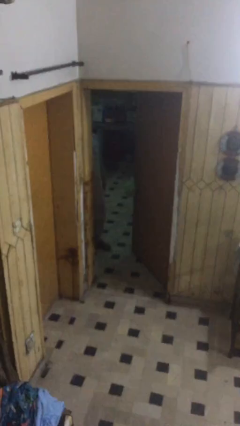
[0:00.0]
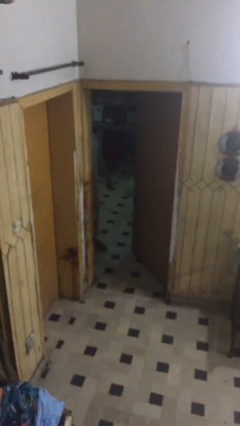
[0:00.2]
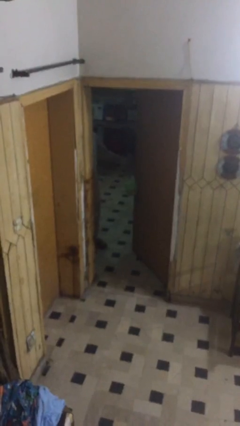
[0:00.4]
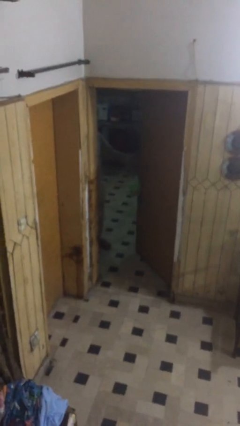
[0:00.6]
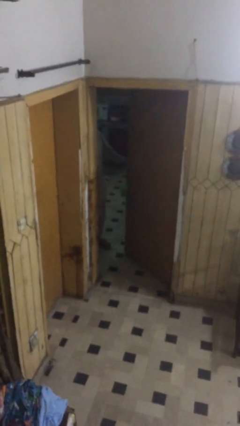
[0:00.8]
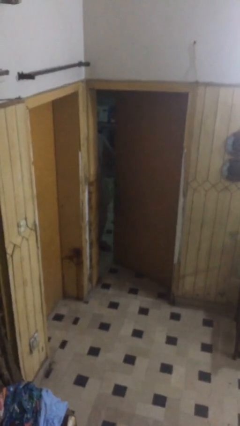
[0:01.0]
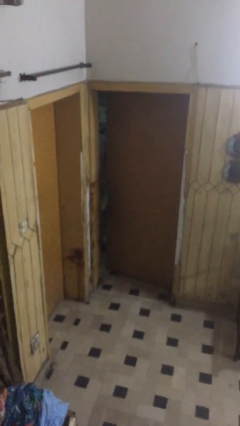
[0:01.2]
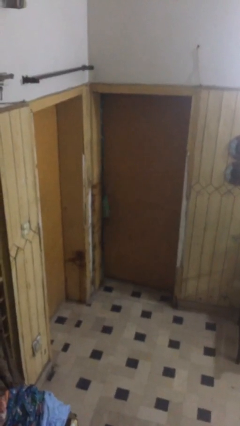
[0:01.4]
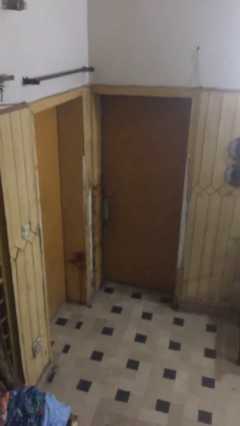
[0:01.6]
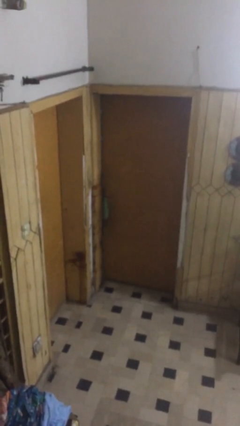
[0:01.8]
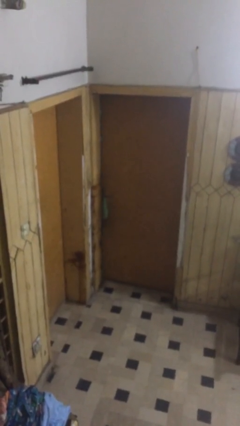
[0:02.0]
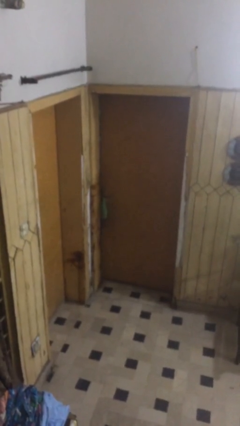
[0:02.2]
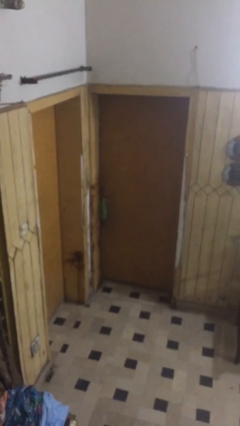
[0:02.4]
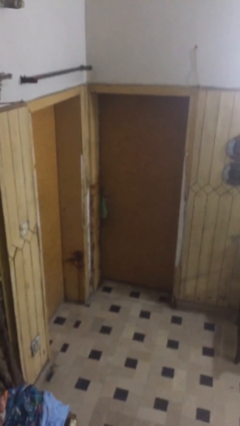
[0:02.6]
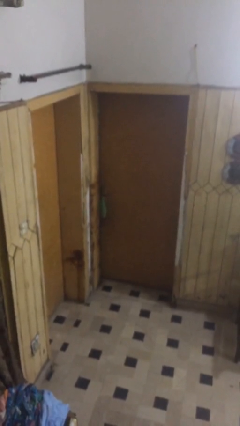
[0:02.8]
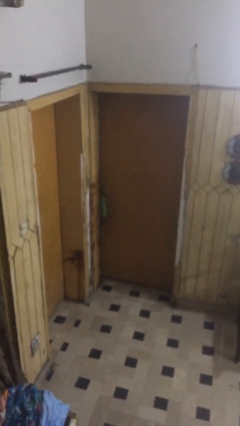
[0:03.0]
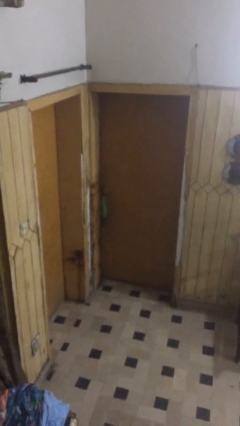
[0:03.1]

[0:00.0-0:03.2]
person closes facility door

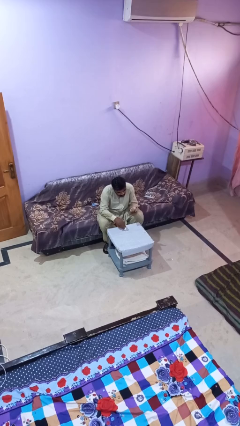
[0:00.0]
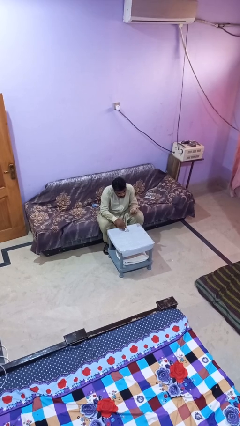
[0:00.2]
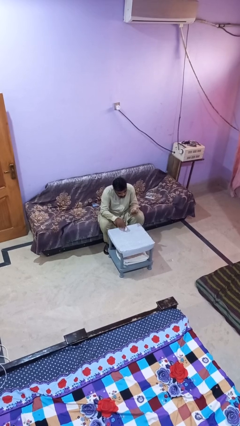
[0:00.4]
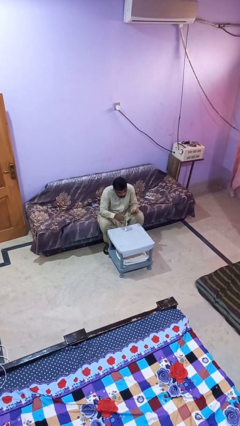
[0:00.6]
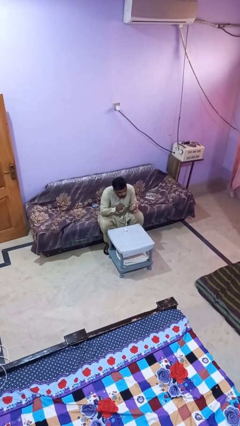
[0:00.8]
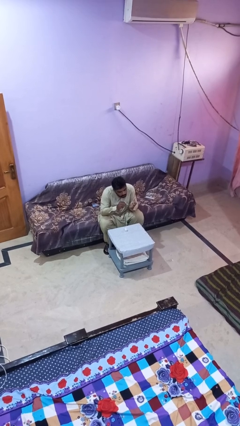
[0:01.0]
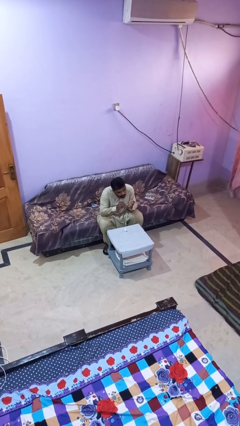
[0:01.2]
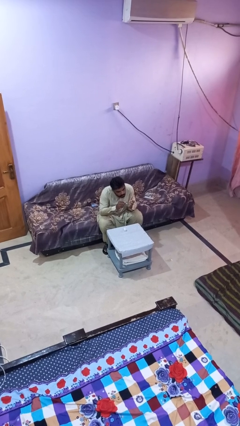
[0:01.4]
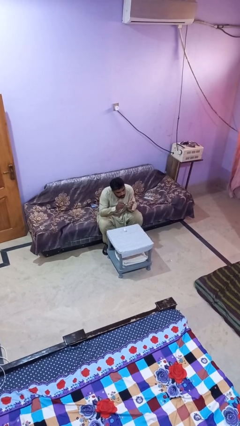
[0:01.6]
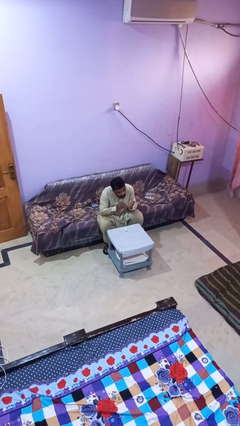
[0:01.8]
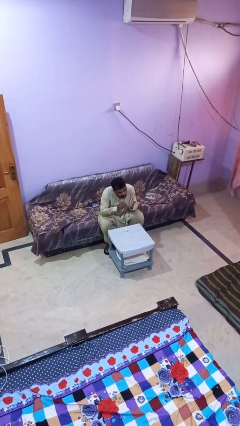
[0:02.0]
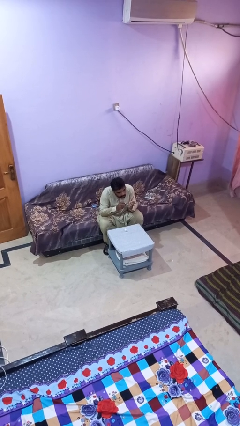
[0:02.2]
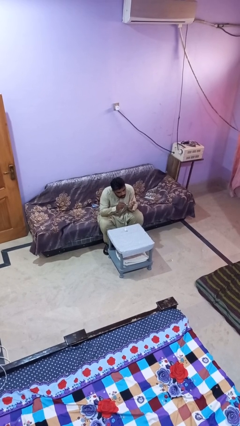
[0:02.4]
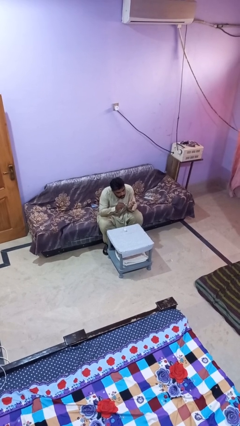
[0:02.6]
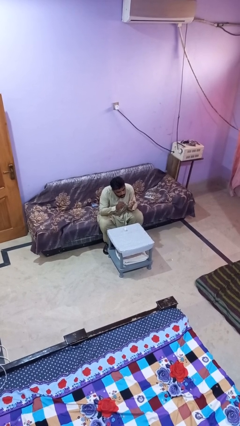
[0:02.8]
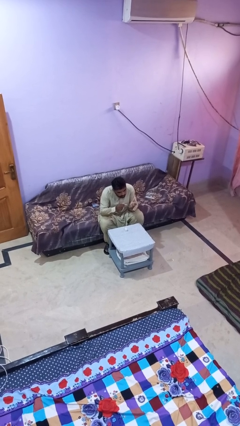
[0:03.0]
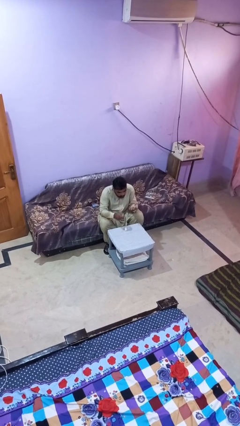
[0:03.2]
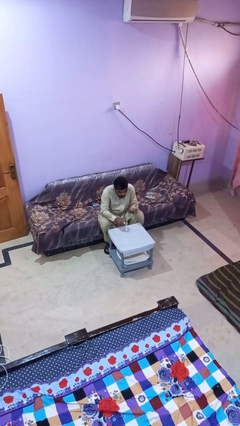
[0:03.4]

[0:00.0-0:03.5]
person paints fingernails

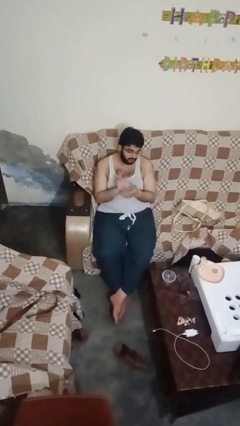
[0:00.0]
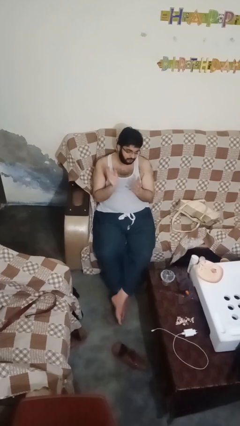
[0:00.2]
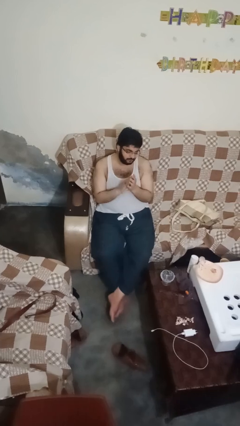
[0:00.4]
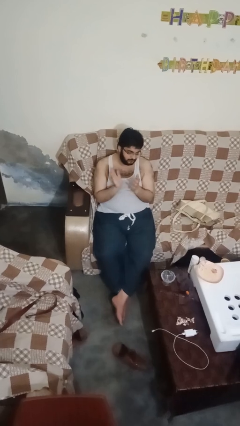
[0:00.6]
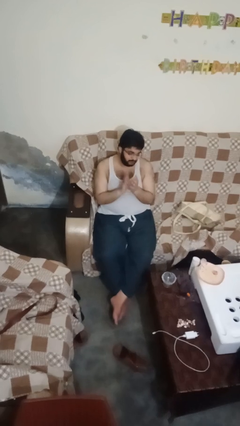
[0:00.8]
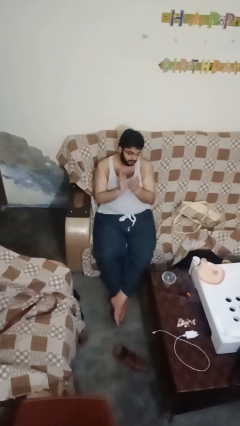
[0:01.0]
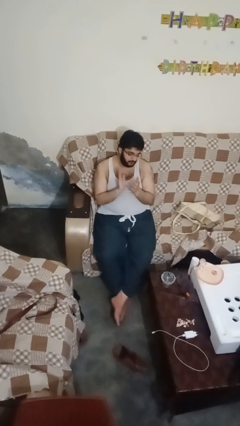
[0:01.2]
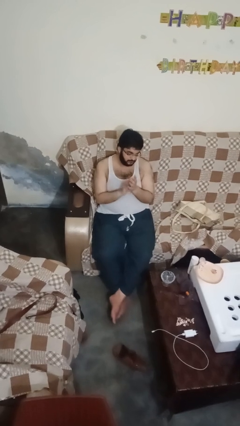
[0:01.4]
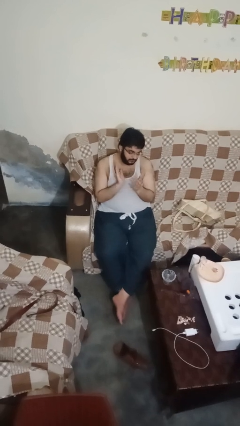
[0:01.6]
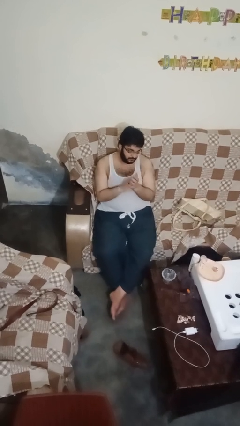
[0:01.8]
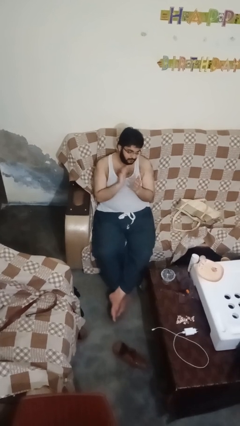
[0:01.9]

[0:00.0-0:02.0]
person claps hands

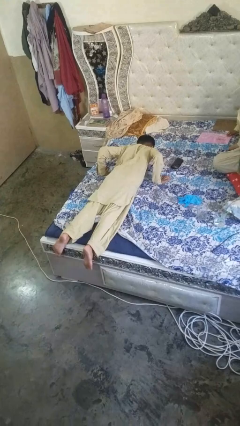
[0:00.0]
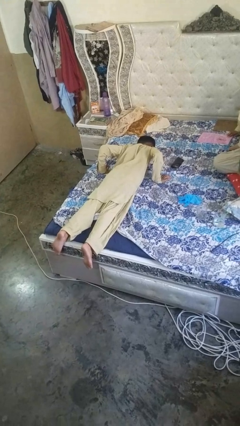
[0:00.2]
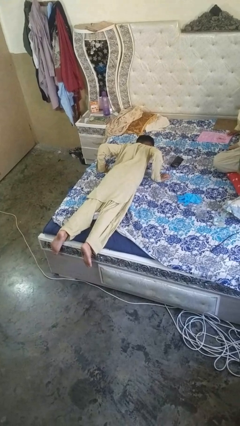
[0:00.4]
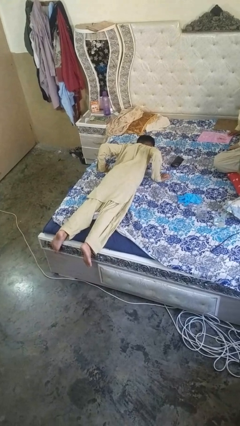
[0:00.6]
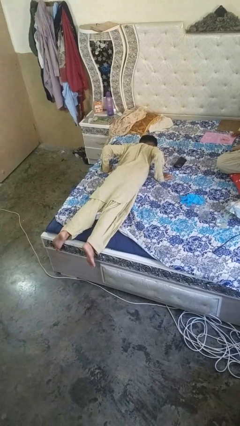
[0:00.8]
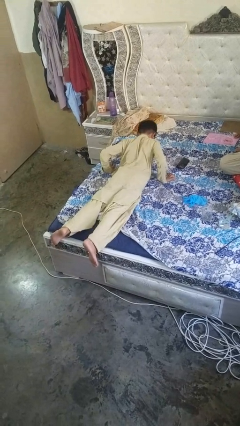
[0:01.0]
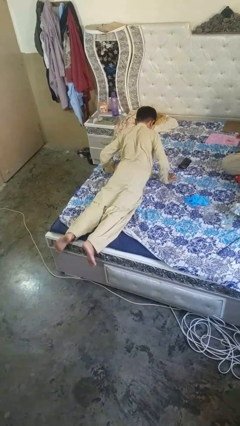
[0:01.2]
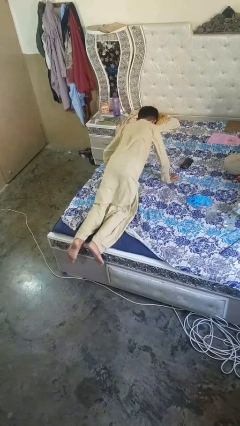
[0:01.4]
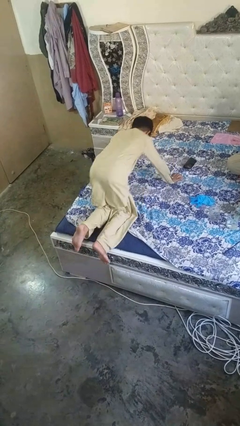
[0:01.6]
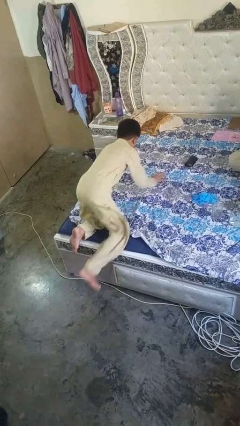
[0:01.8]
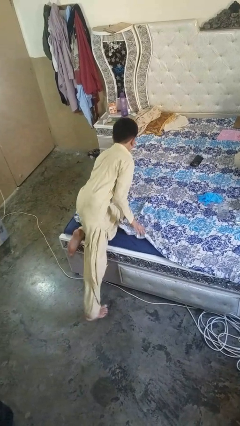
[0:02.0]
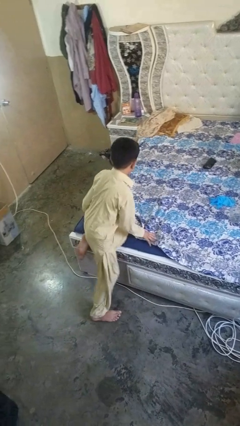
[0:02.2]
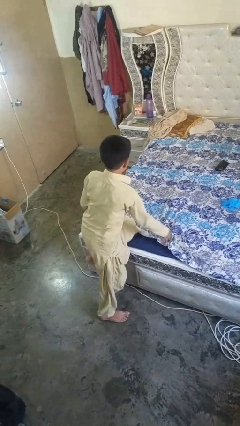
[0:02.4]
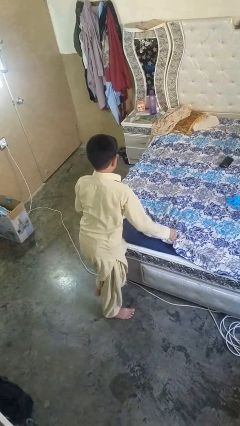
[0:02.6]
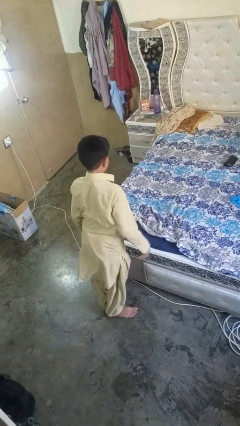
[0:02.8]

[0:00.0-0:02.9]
person stands up

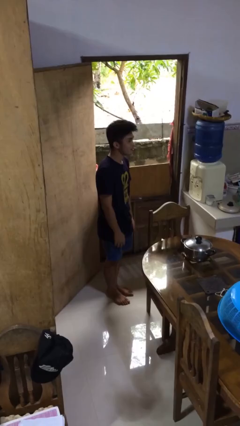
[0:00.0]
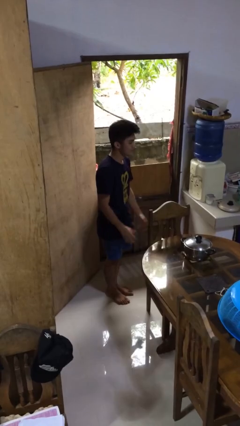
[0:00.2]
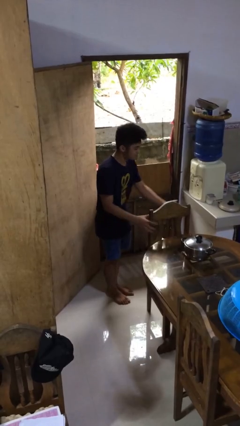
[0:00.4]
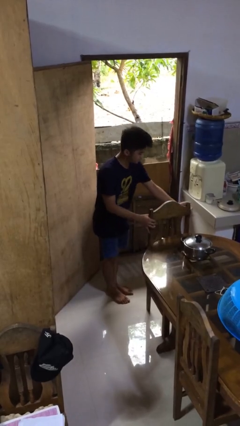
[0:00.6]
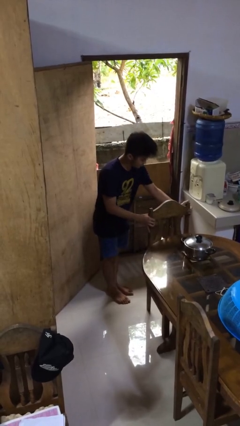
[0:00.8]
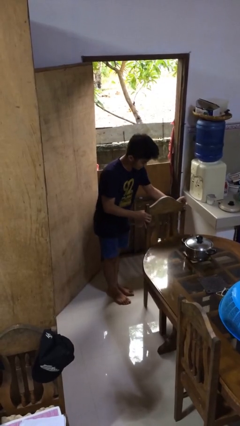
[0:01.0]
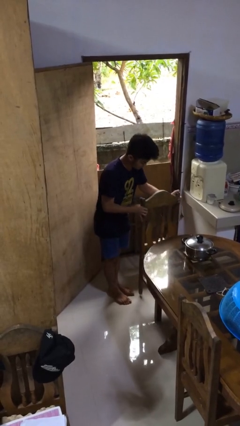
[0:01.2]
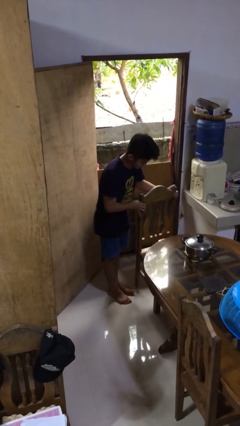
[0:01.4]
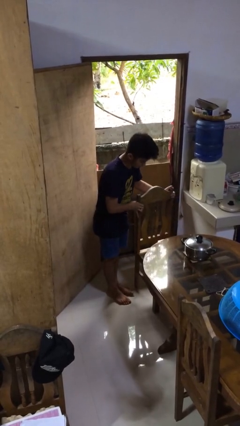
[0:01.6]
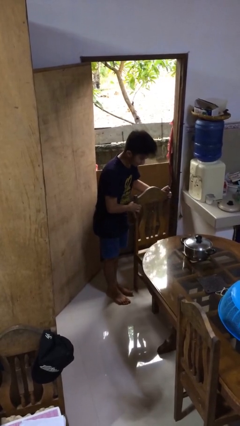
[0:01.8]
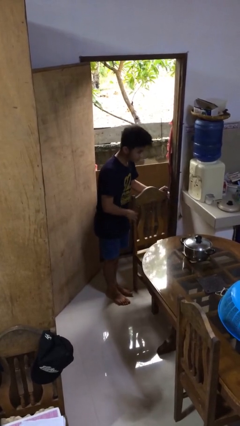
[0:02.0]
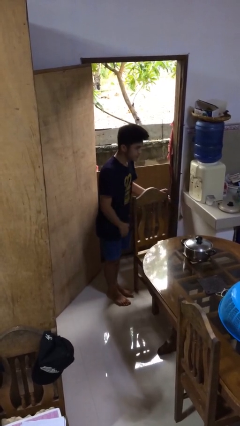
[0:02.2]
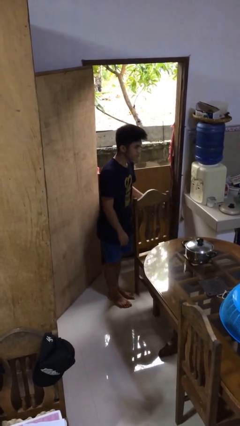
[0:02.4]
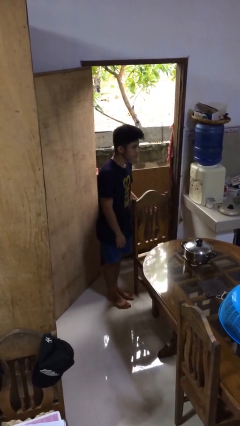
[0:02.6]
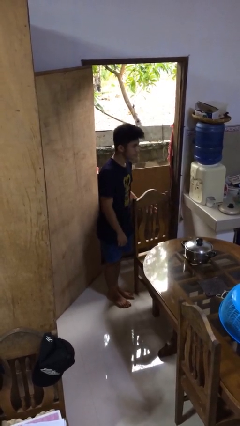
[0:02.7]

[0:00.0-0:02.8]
person pulls out chair

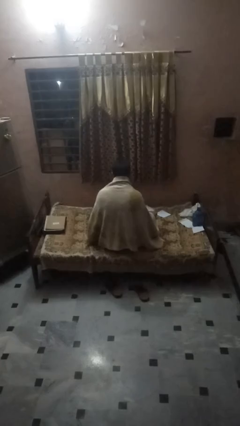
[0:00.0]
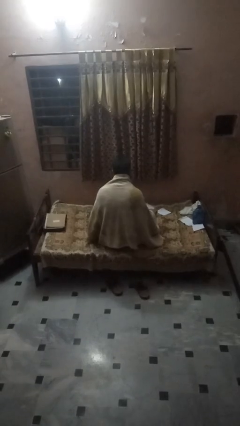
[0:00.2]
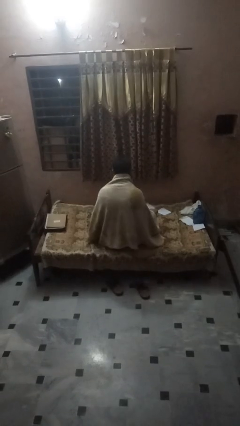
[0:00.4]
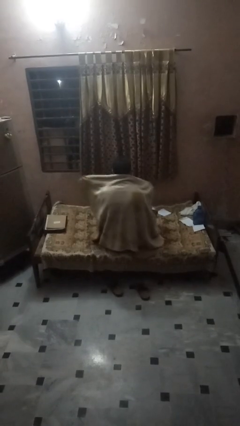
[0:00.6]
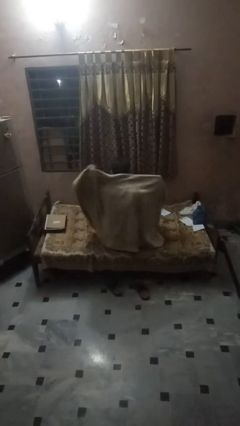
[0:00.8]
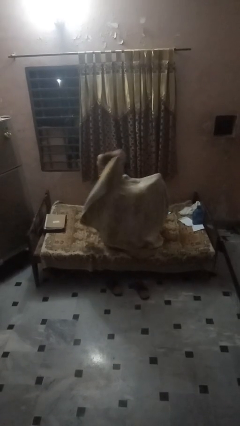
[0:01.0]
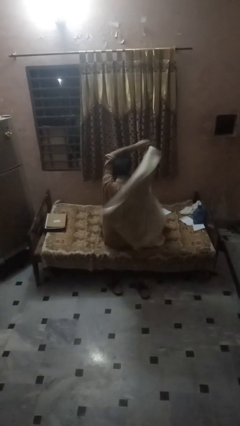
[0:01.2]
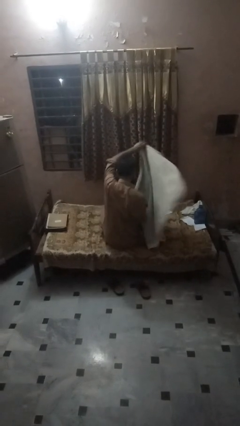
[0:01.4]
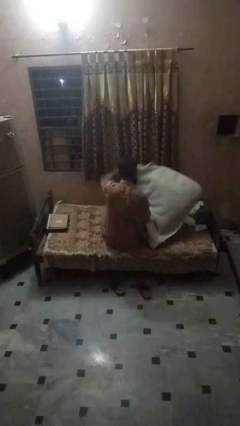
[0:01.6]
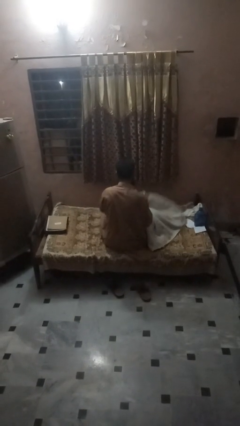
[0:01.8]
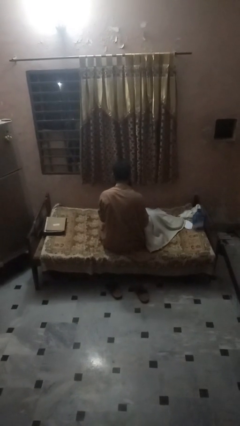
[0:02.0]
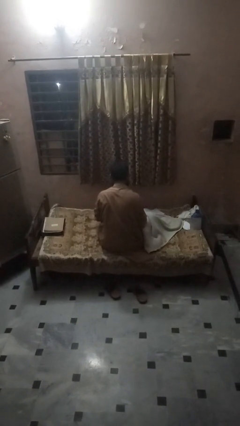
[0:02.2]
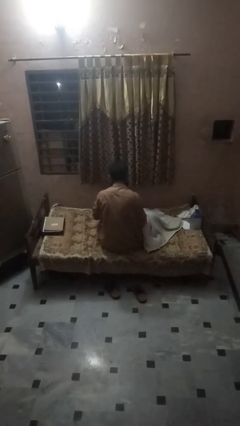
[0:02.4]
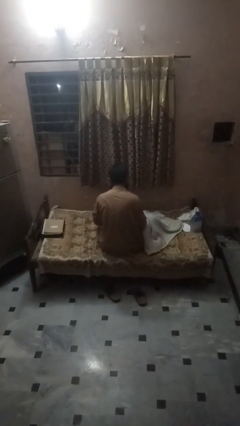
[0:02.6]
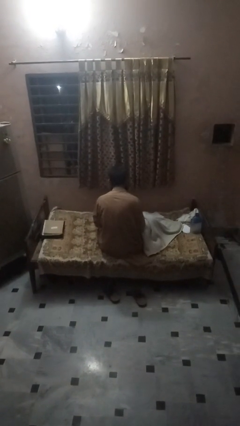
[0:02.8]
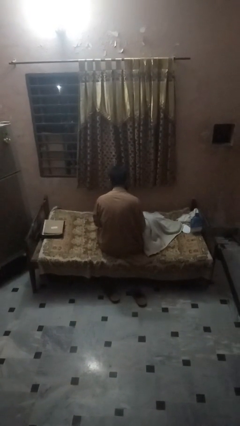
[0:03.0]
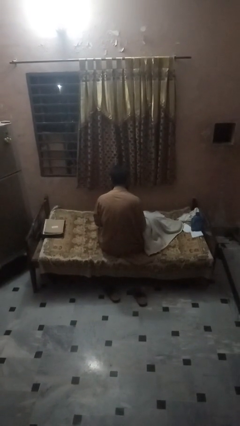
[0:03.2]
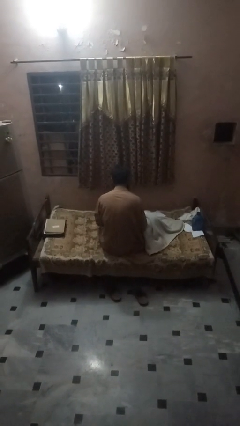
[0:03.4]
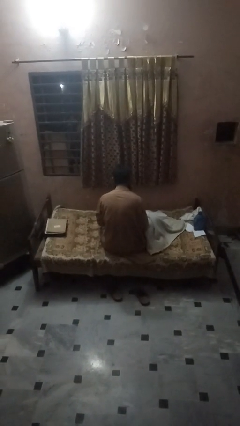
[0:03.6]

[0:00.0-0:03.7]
person uncovers with blanket
